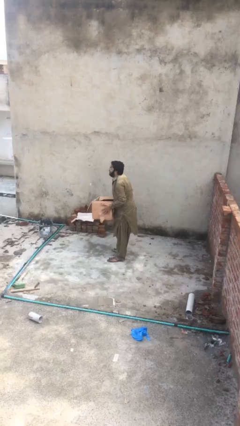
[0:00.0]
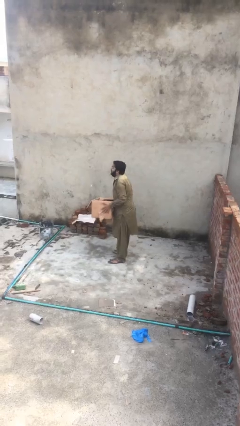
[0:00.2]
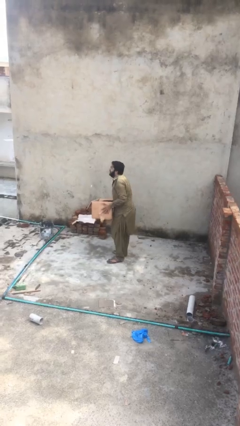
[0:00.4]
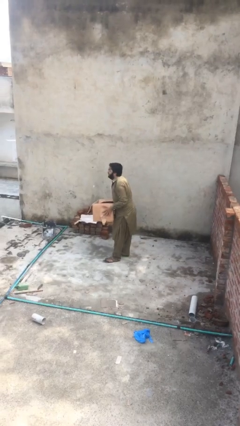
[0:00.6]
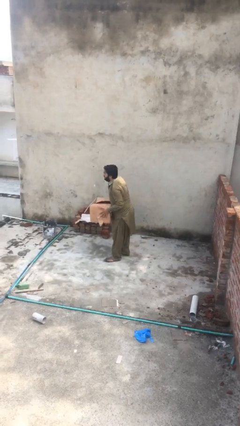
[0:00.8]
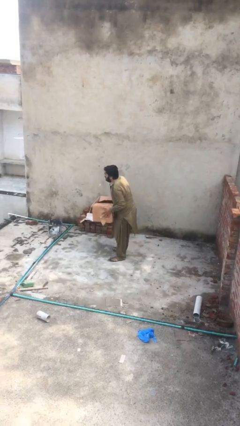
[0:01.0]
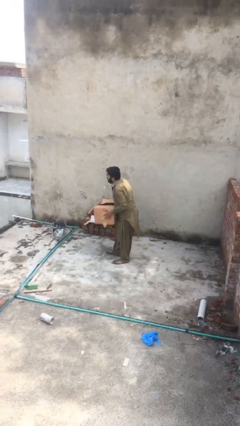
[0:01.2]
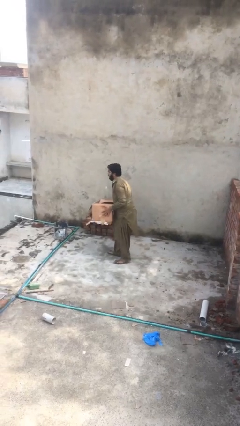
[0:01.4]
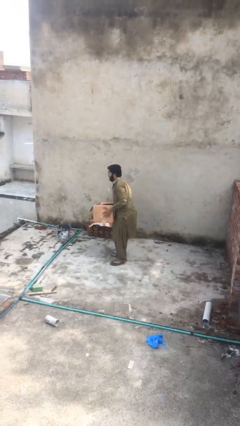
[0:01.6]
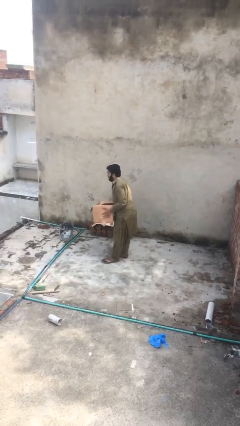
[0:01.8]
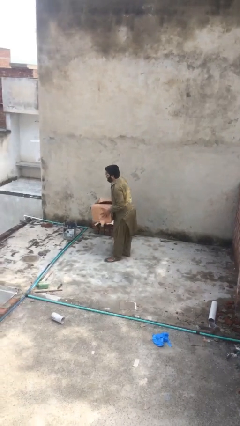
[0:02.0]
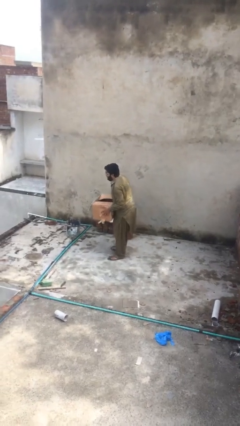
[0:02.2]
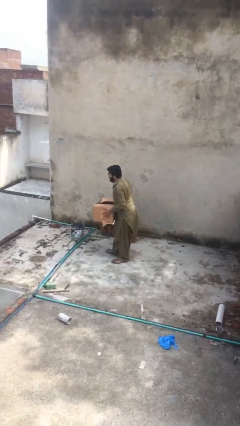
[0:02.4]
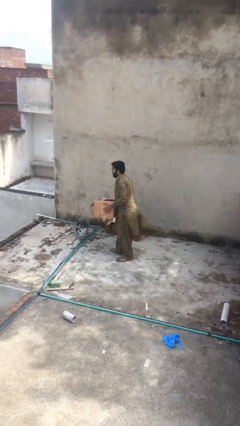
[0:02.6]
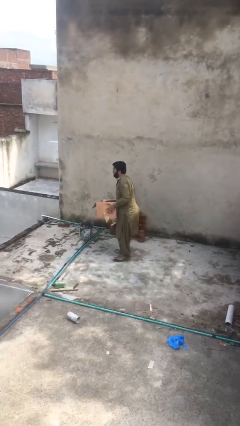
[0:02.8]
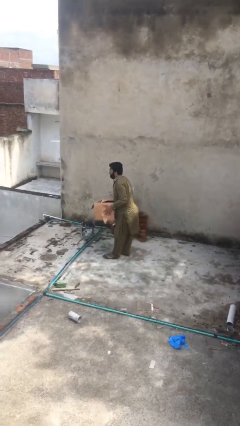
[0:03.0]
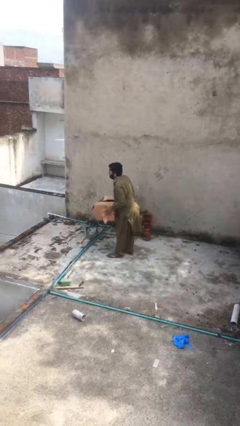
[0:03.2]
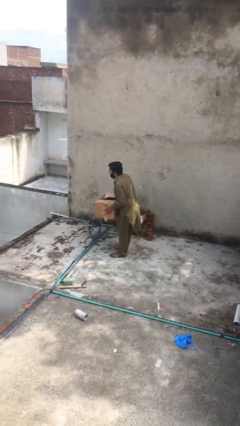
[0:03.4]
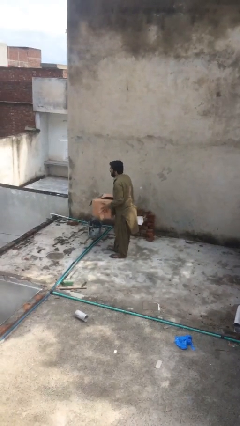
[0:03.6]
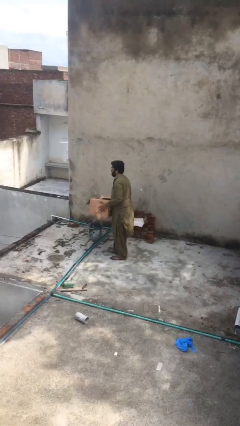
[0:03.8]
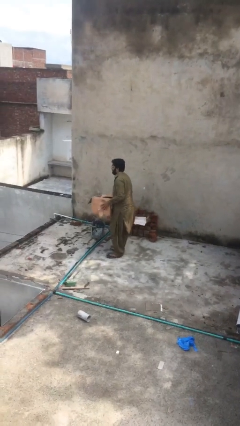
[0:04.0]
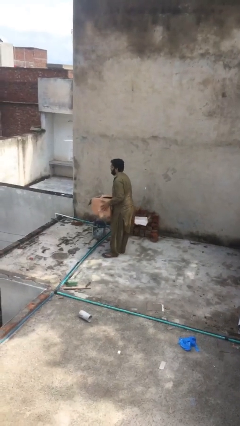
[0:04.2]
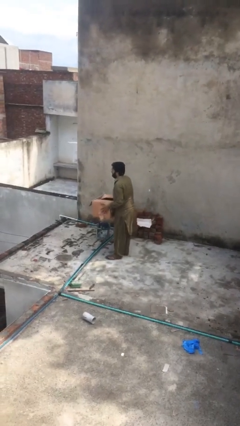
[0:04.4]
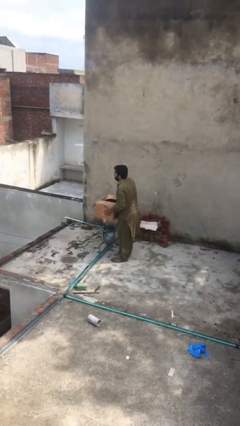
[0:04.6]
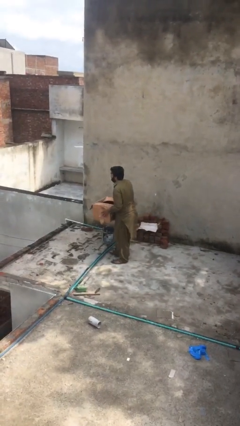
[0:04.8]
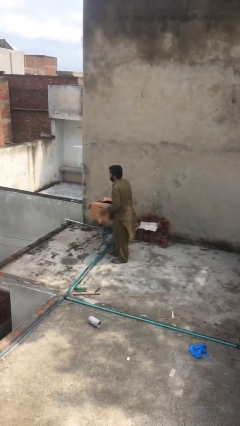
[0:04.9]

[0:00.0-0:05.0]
person carries heavy object

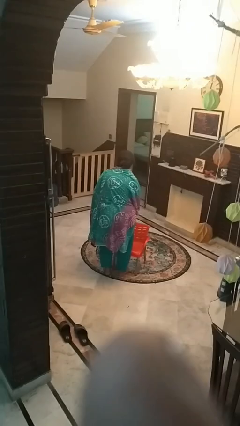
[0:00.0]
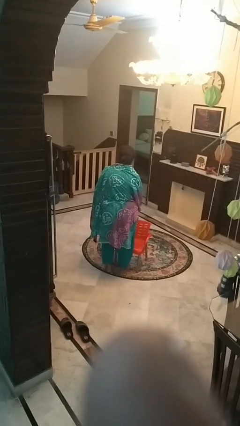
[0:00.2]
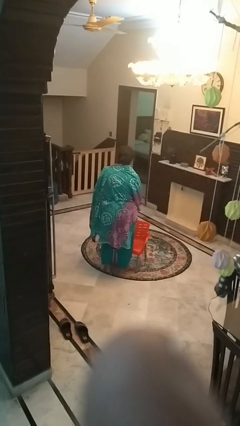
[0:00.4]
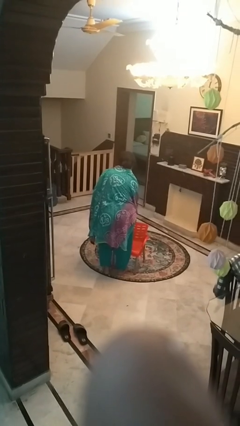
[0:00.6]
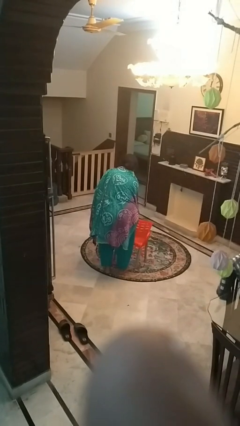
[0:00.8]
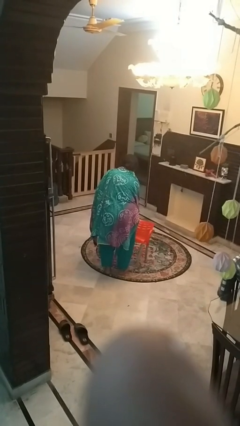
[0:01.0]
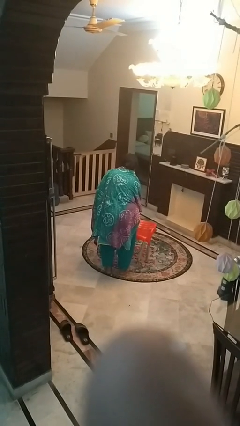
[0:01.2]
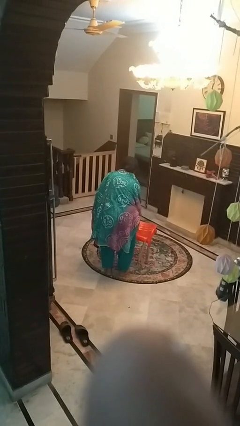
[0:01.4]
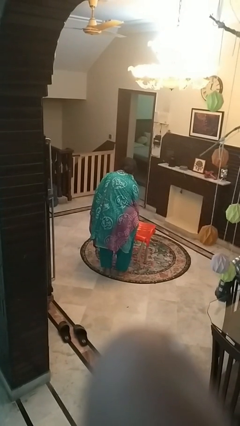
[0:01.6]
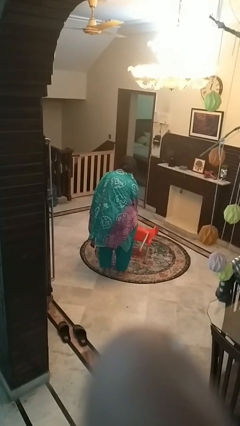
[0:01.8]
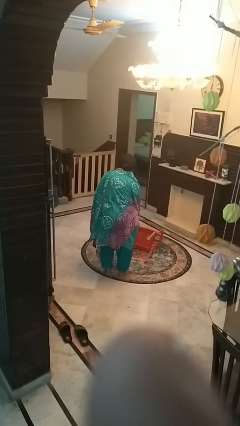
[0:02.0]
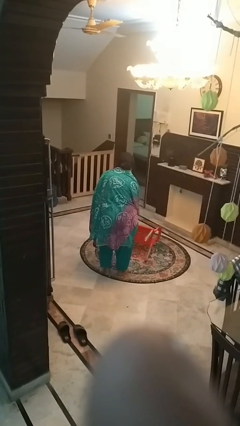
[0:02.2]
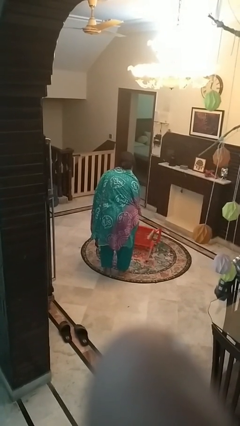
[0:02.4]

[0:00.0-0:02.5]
person knocks over furniture

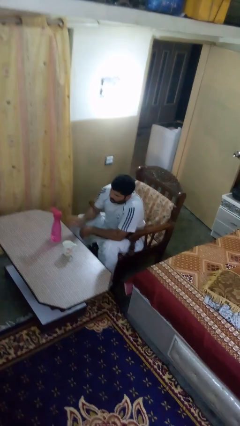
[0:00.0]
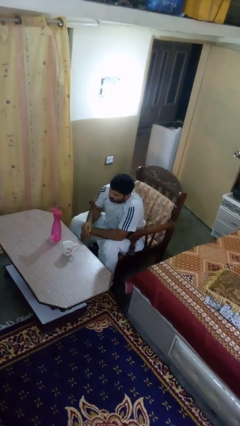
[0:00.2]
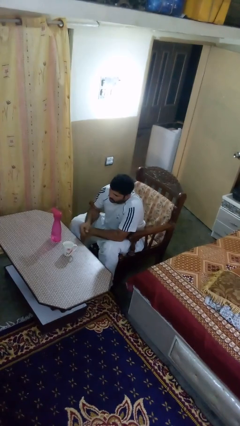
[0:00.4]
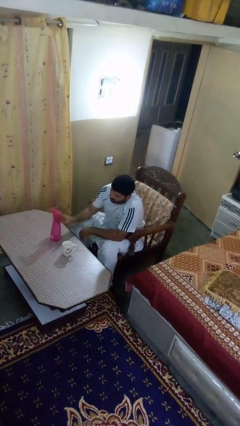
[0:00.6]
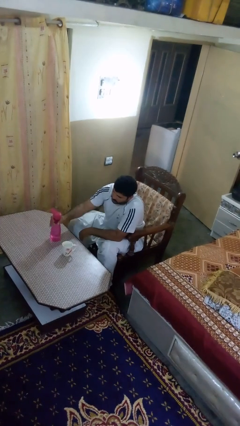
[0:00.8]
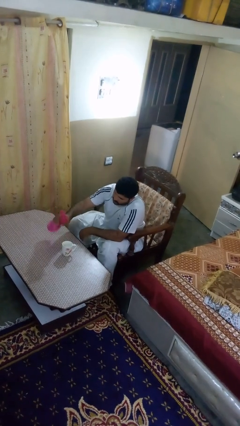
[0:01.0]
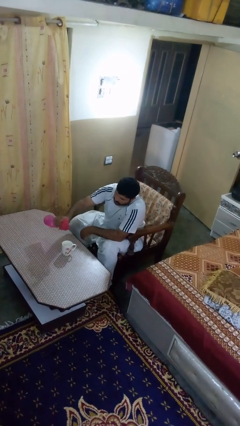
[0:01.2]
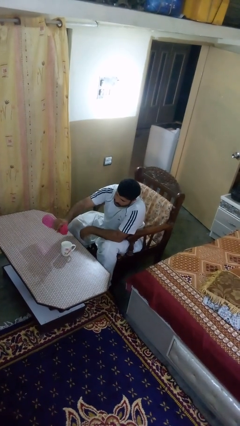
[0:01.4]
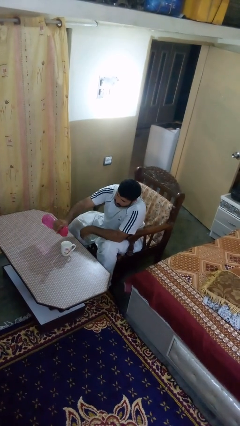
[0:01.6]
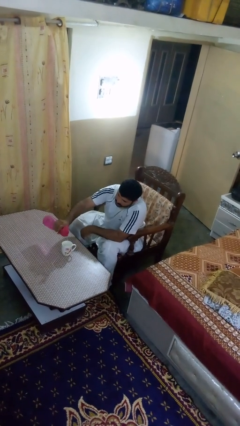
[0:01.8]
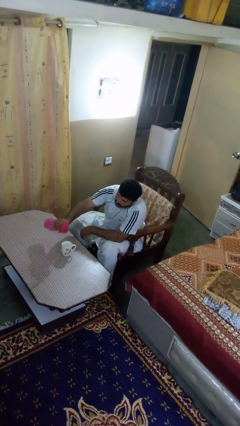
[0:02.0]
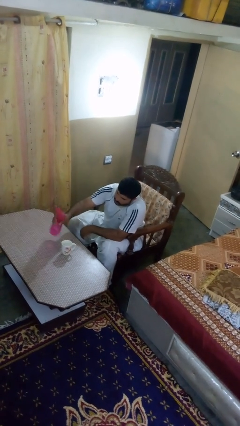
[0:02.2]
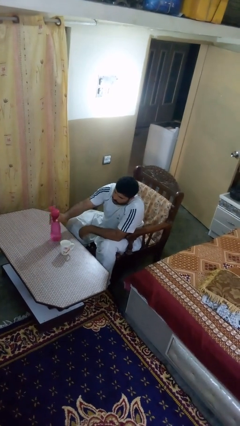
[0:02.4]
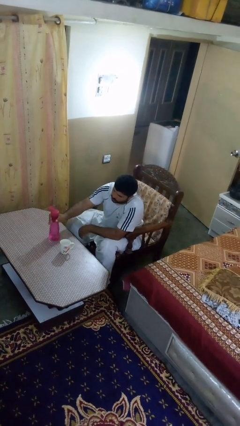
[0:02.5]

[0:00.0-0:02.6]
person pours liquid into cup

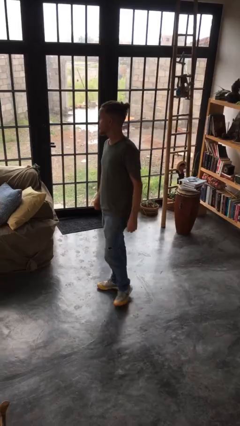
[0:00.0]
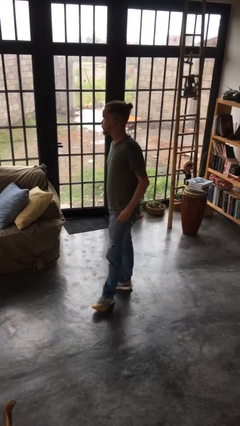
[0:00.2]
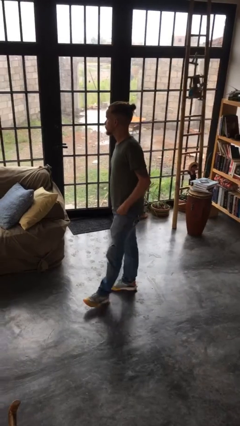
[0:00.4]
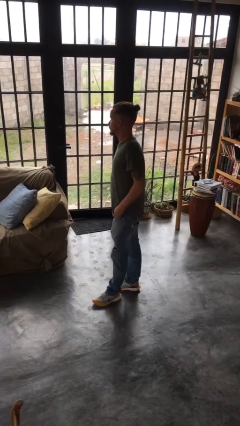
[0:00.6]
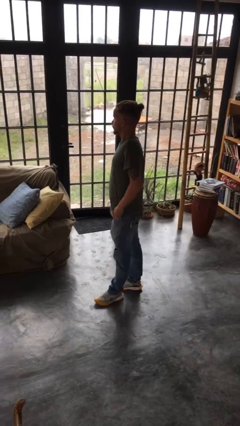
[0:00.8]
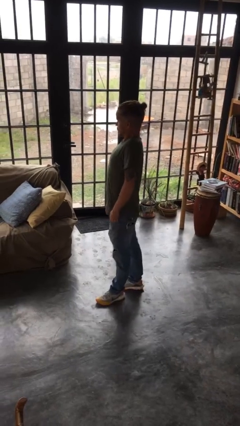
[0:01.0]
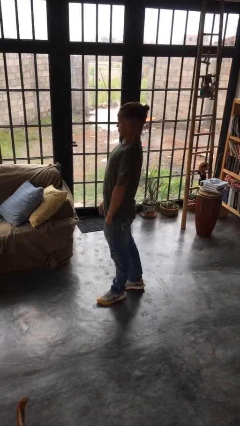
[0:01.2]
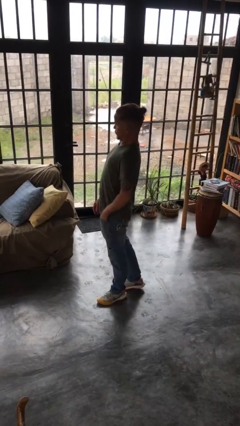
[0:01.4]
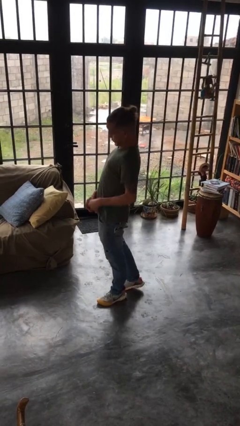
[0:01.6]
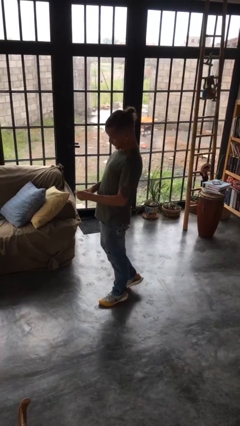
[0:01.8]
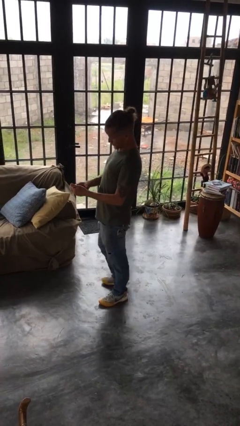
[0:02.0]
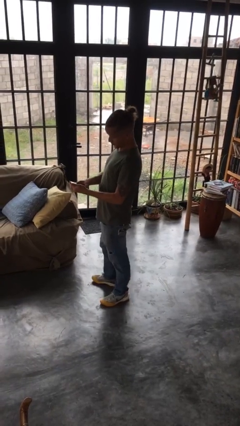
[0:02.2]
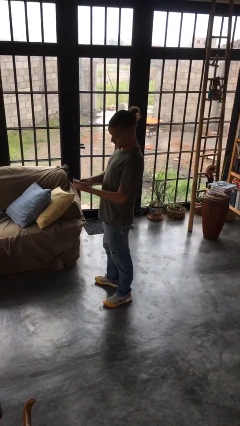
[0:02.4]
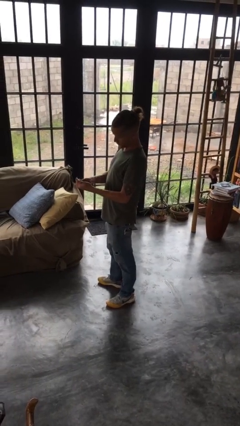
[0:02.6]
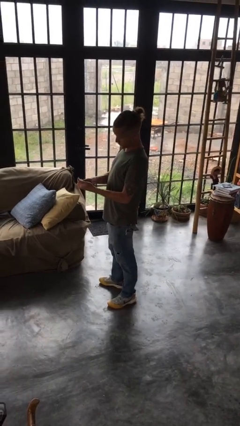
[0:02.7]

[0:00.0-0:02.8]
person takes phone from pocket

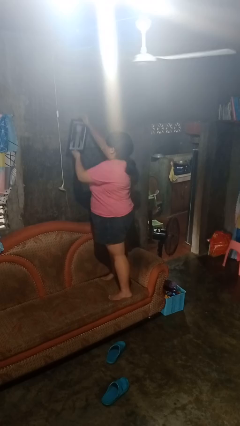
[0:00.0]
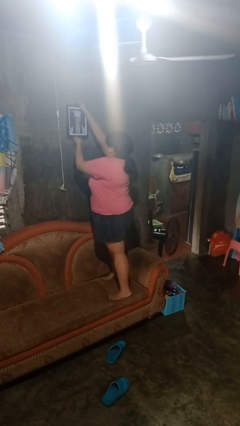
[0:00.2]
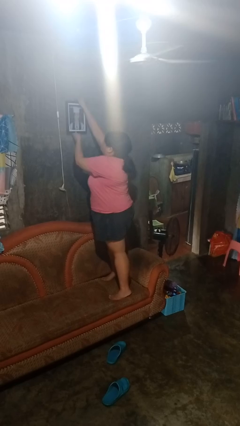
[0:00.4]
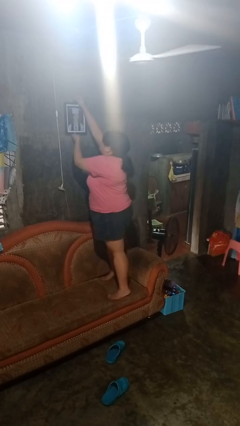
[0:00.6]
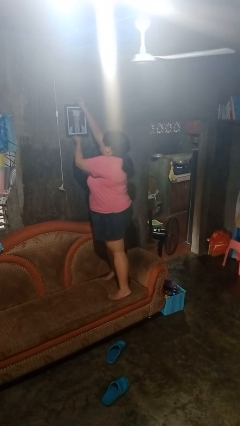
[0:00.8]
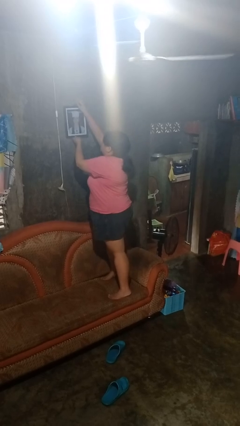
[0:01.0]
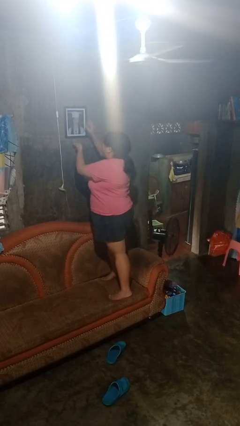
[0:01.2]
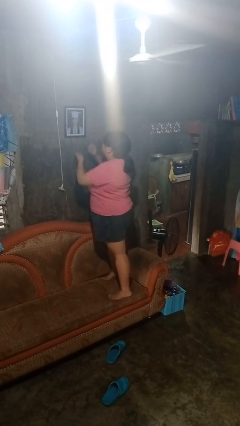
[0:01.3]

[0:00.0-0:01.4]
person puts up picture frame

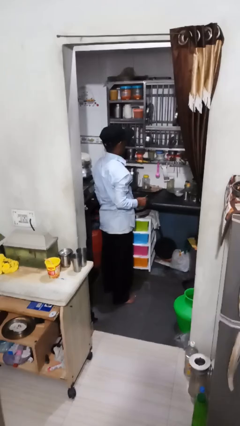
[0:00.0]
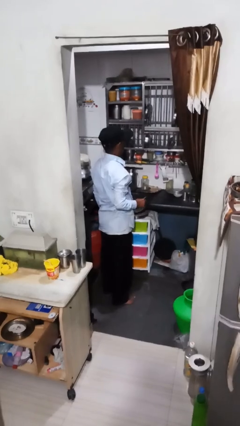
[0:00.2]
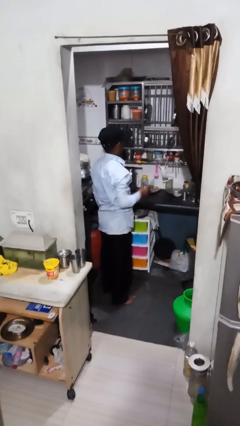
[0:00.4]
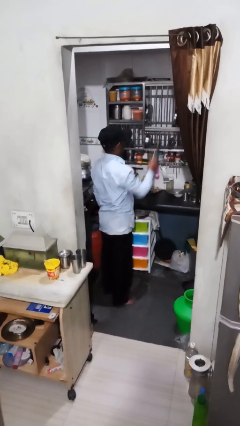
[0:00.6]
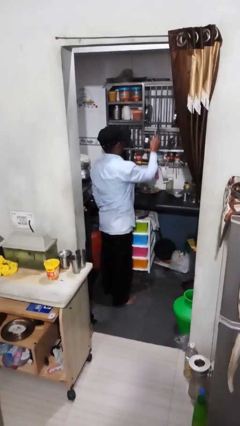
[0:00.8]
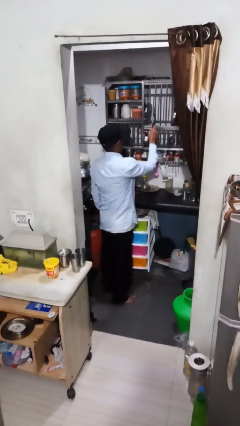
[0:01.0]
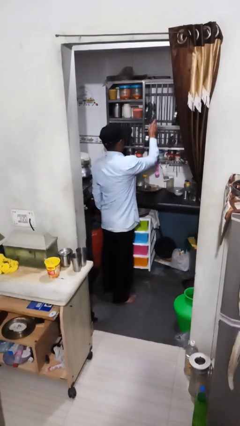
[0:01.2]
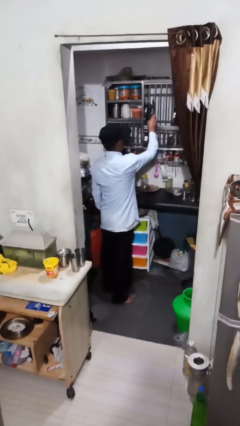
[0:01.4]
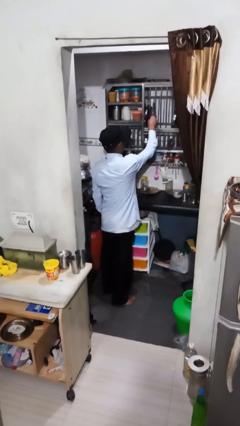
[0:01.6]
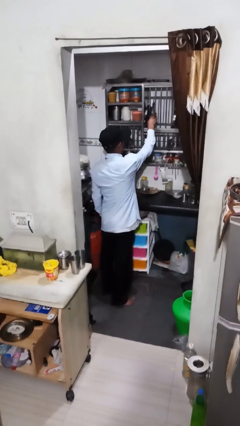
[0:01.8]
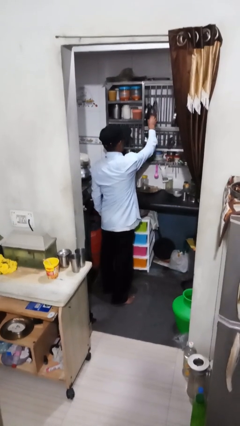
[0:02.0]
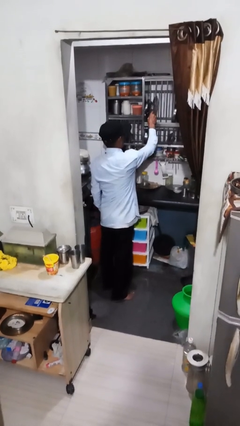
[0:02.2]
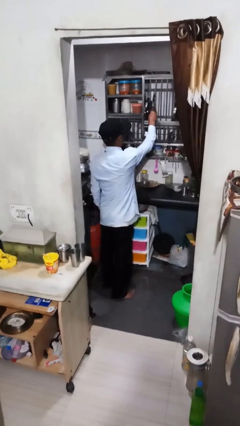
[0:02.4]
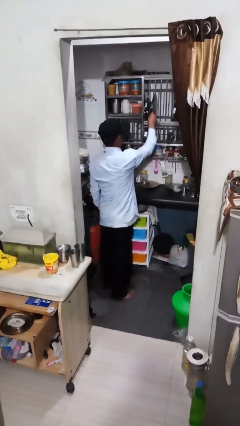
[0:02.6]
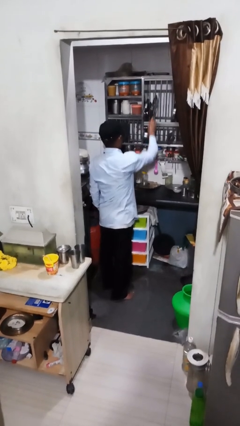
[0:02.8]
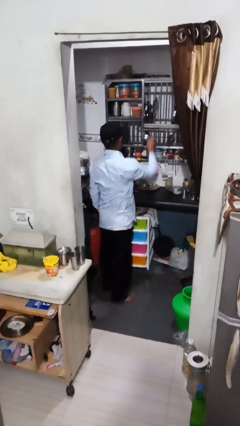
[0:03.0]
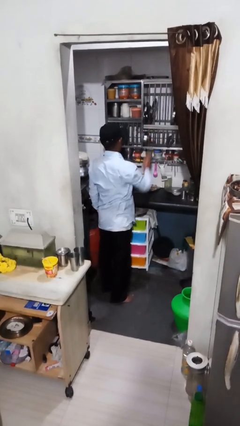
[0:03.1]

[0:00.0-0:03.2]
person puts object in cabinet
